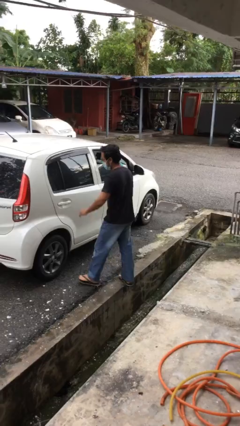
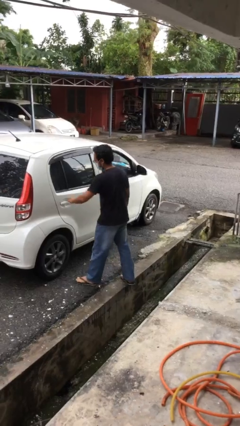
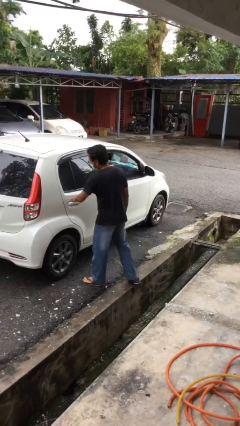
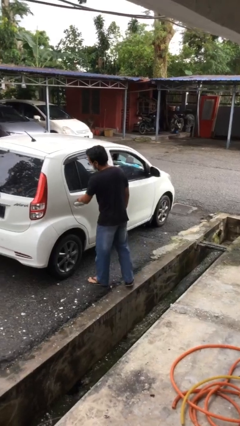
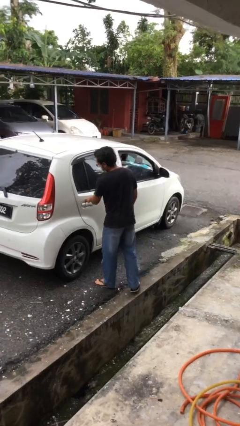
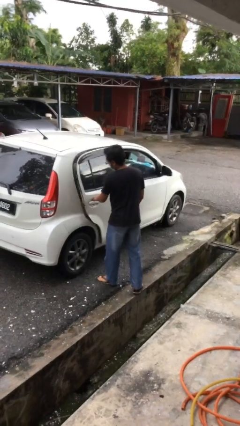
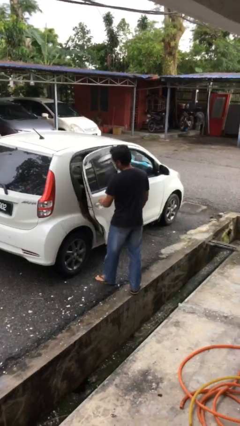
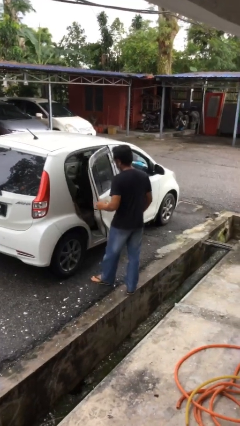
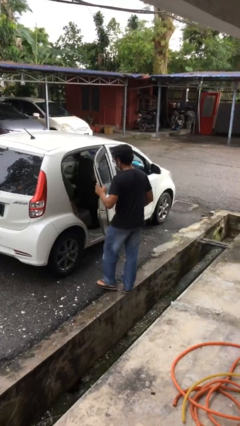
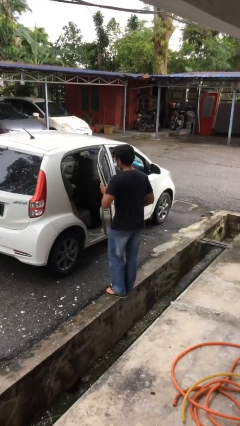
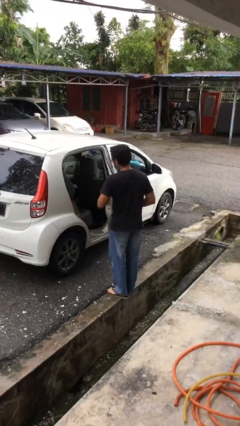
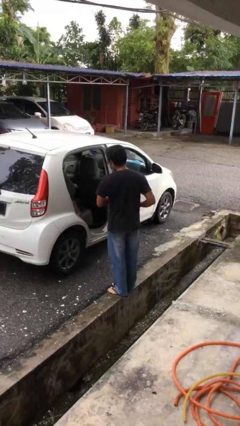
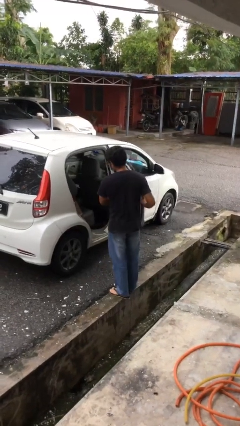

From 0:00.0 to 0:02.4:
person opens car door

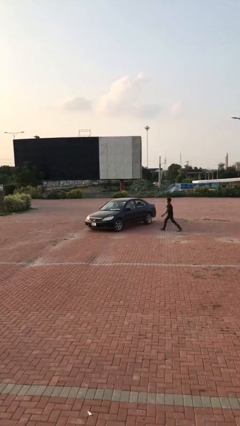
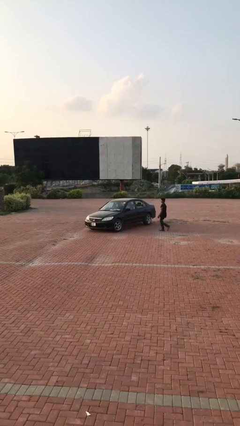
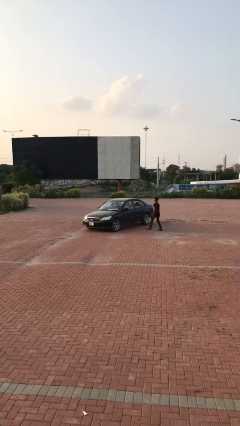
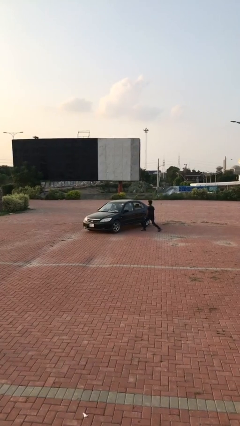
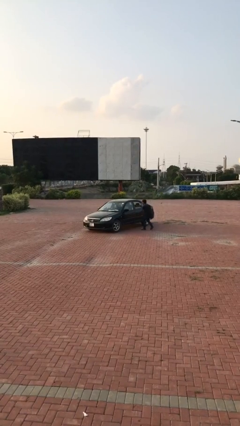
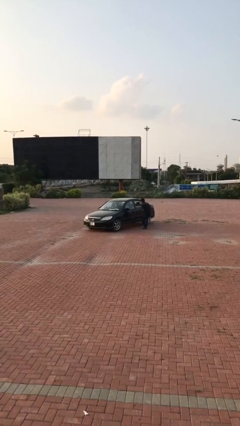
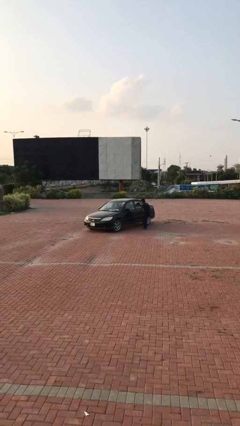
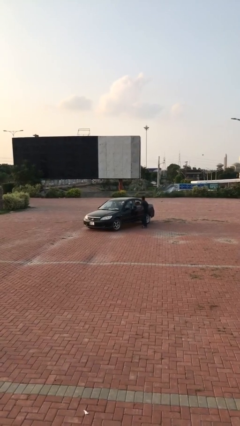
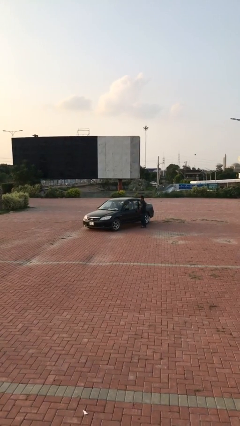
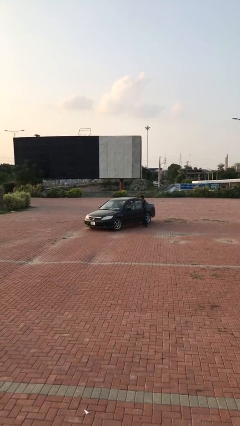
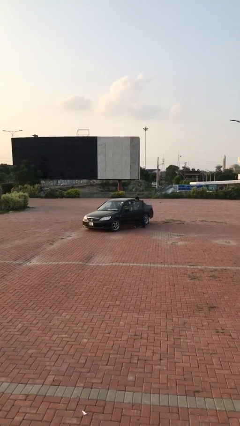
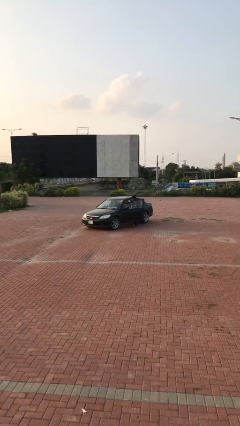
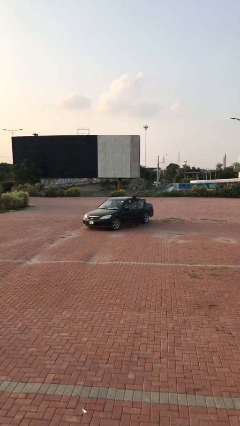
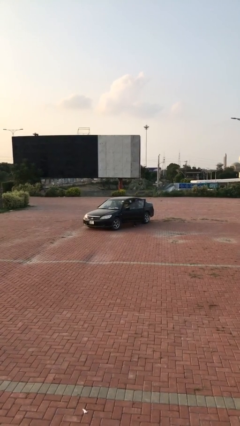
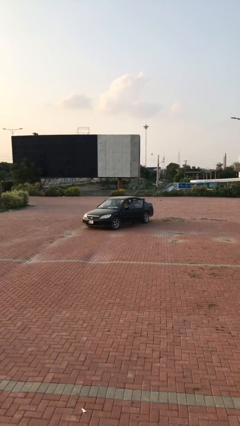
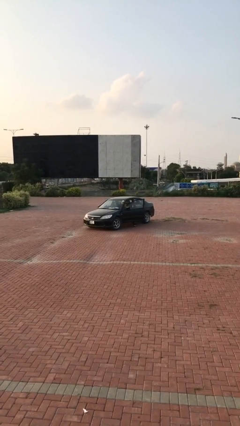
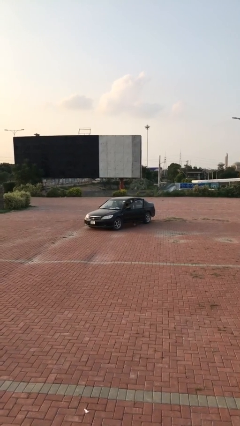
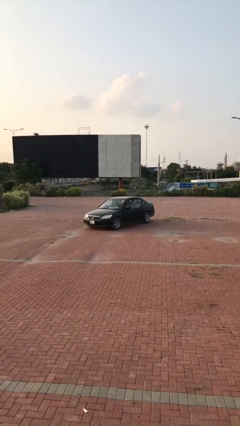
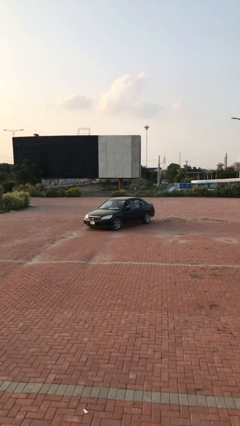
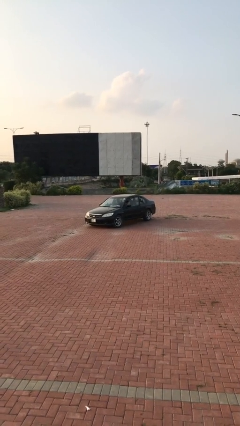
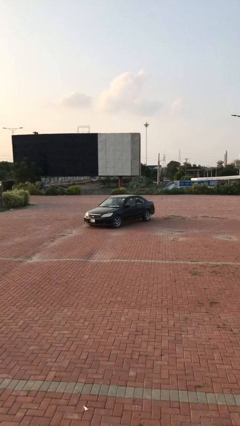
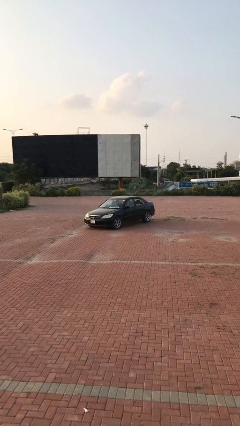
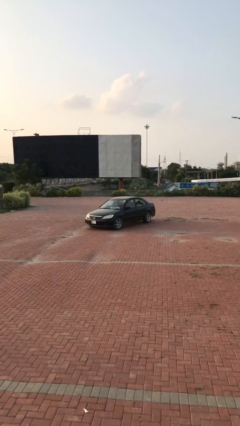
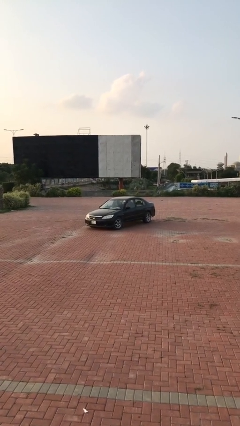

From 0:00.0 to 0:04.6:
car picks up person

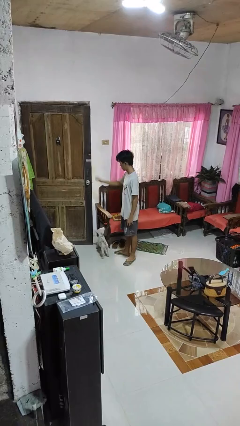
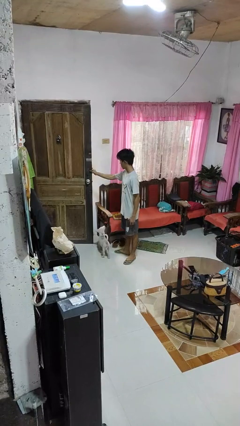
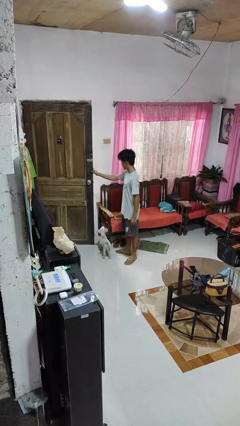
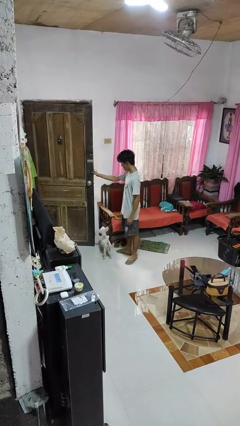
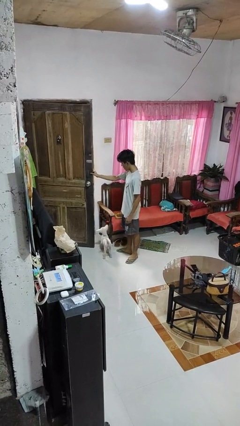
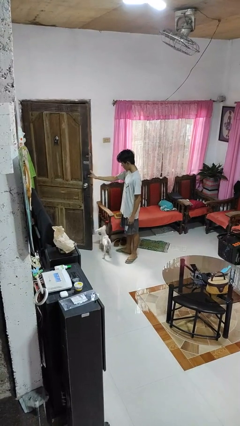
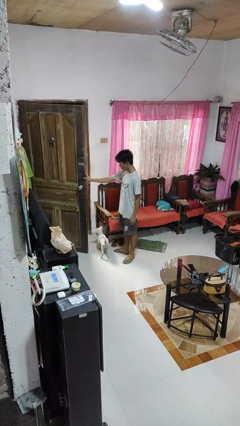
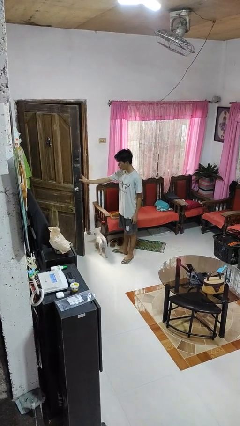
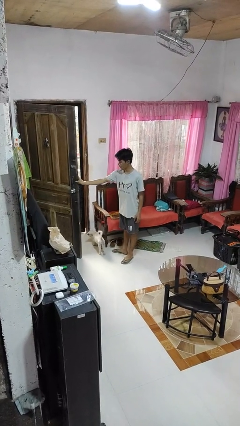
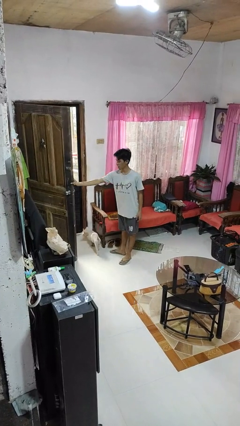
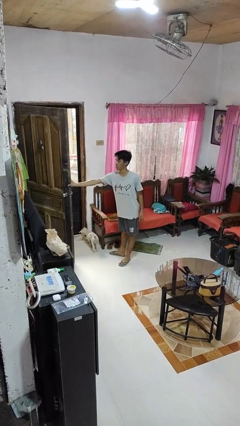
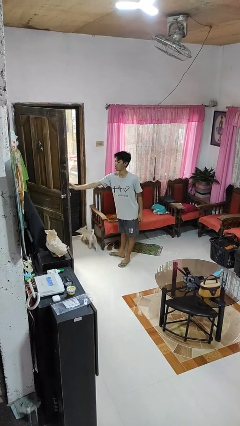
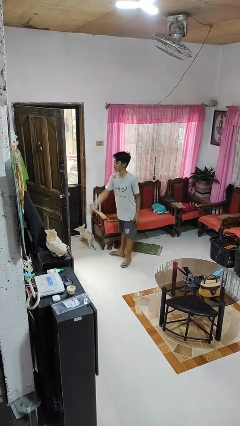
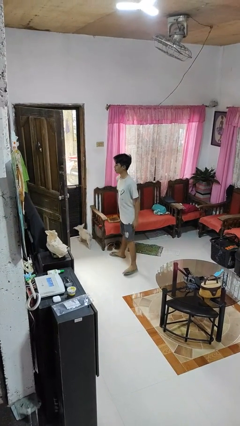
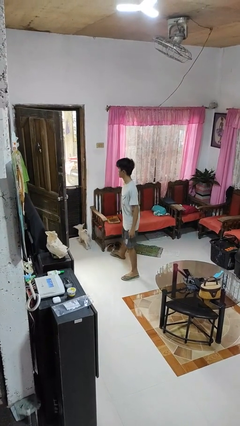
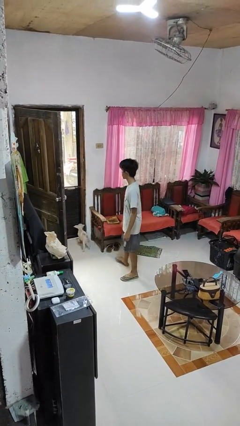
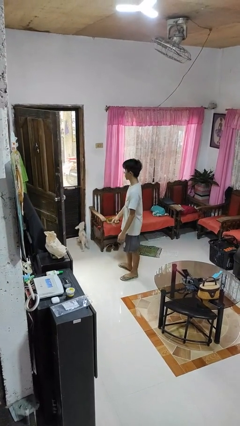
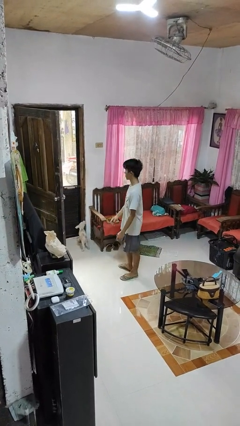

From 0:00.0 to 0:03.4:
person opens facility door

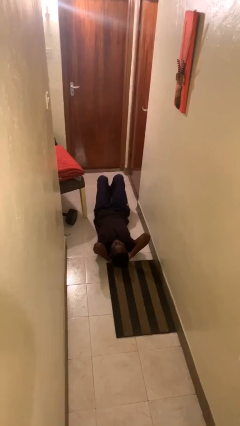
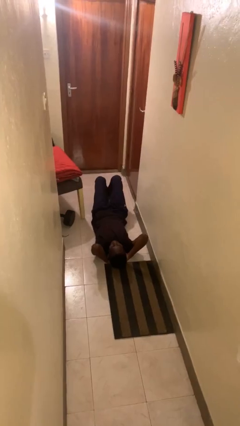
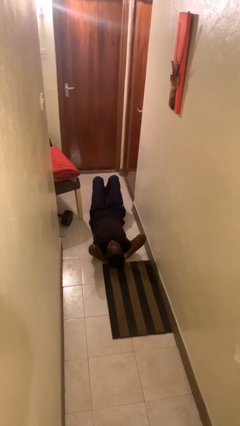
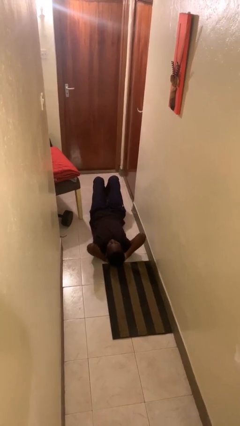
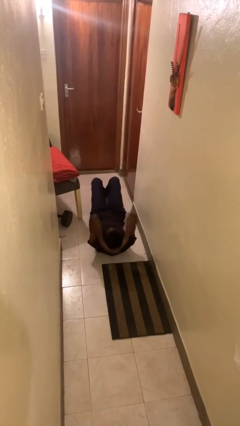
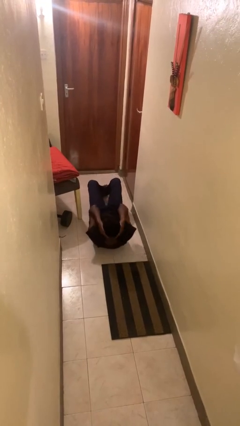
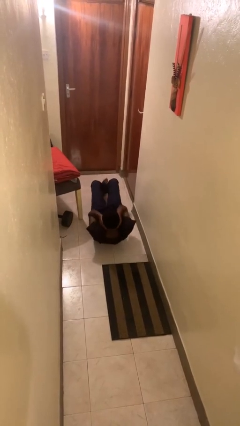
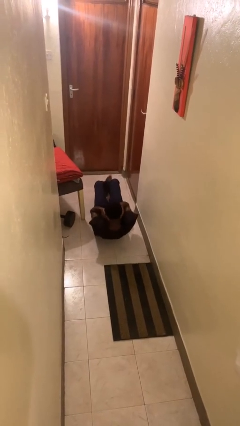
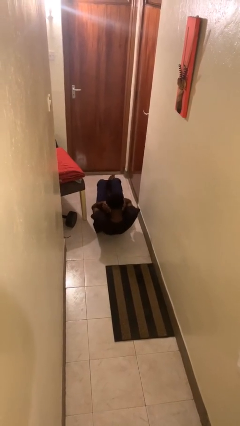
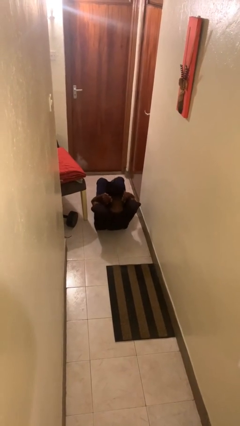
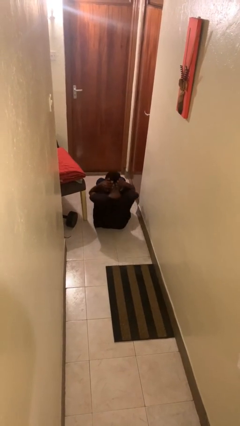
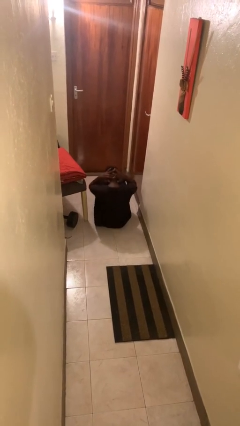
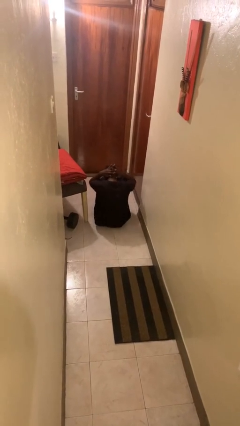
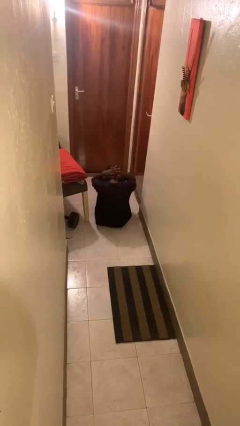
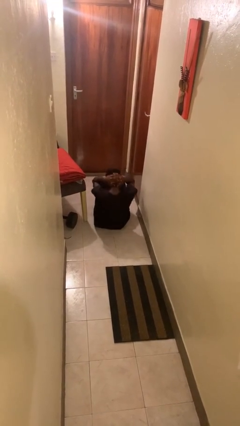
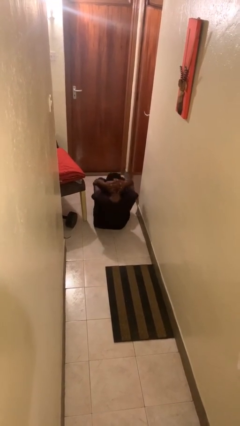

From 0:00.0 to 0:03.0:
person exercises with situp

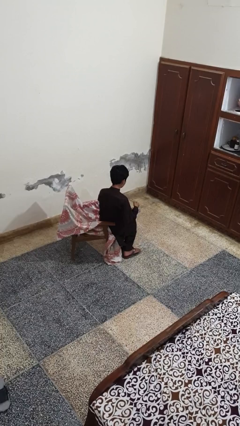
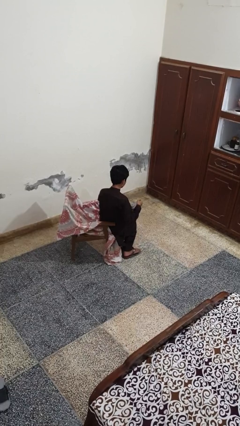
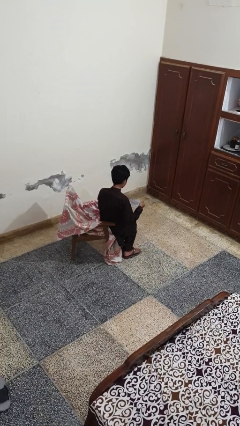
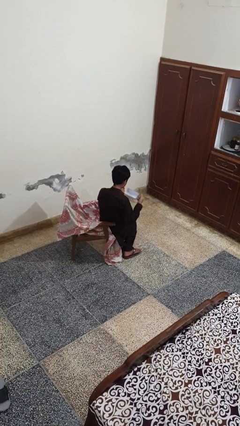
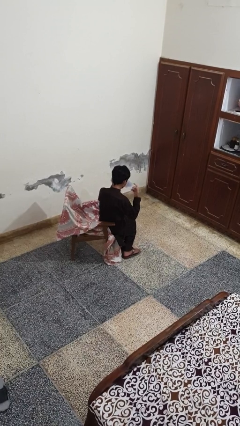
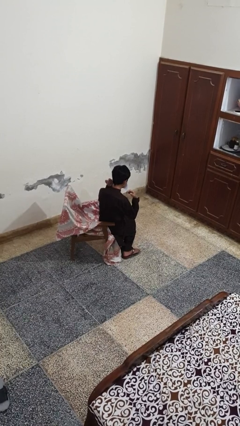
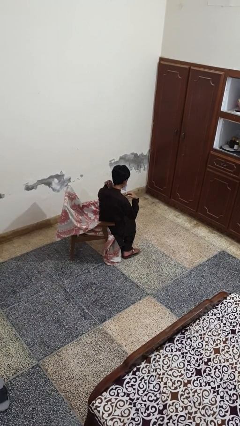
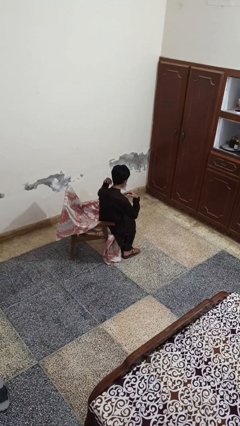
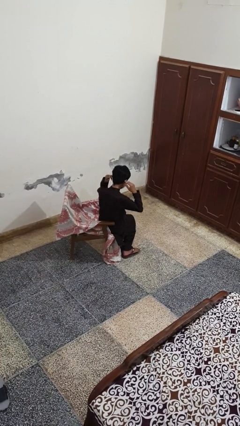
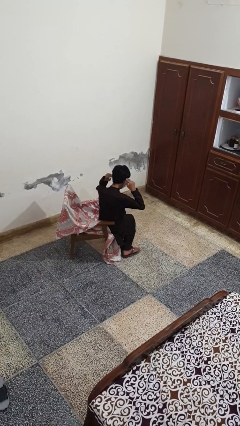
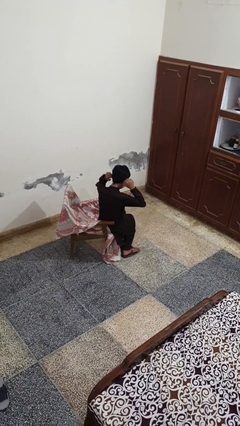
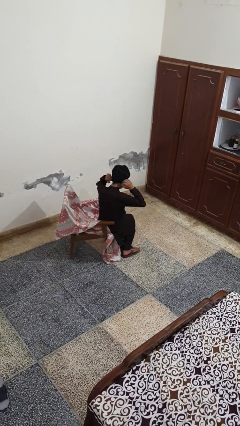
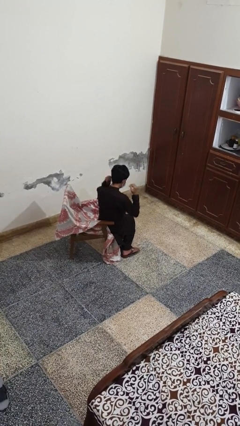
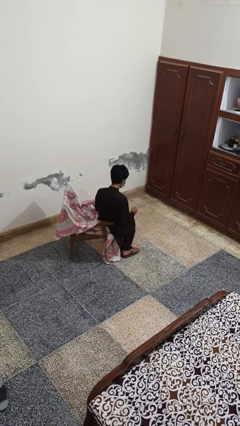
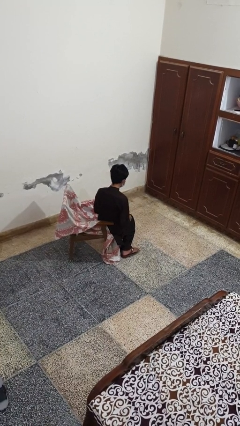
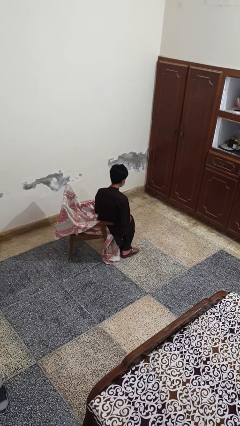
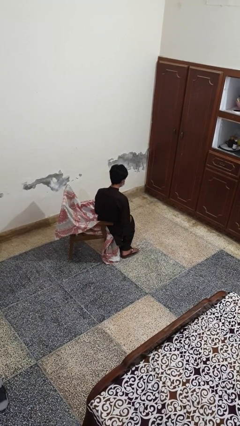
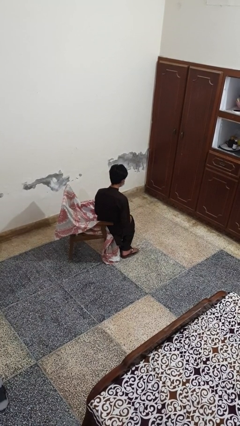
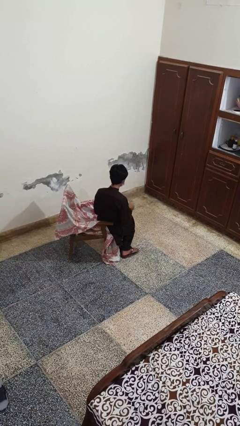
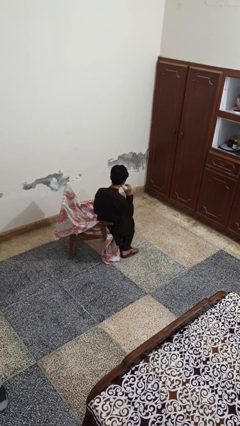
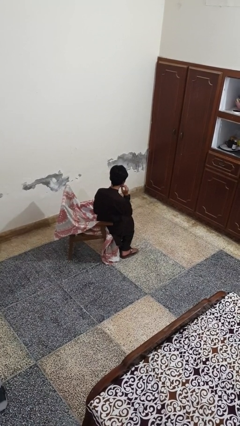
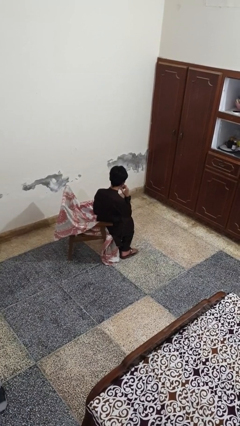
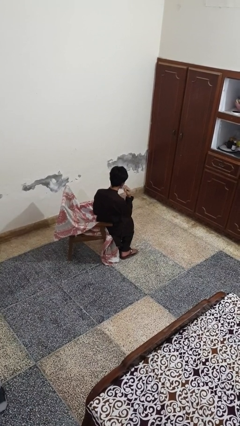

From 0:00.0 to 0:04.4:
person puts on facemask

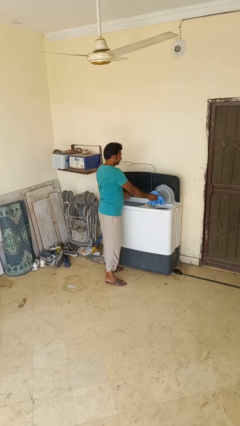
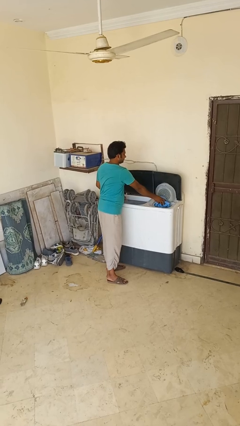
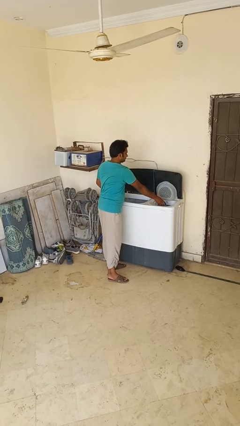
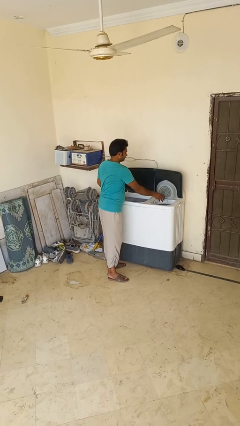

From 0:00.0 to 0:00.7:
person loads dryer
